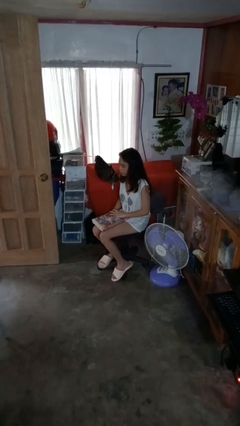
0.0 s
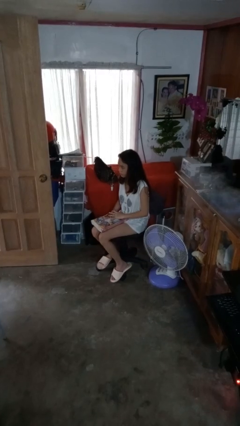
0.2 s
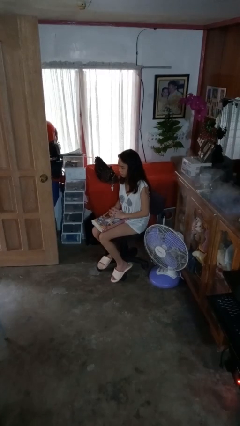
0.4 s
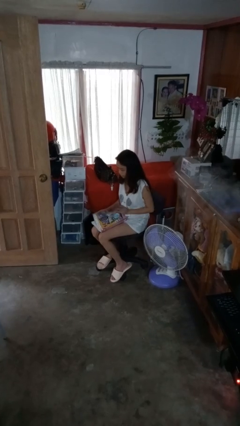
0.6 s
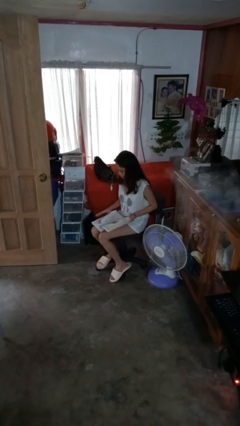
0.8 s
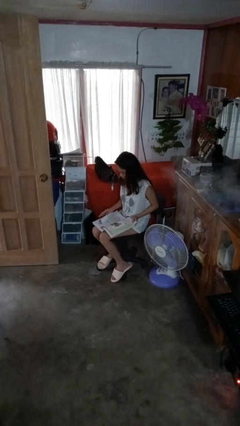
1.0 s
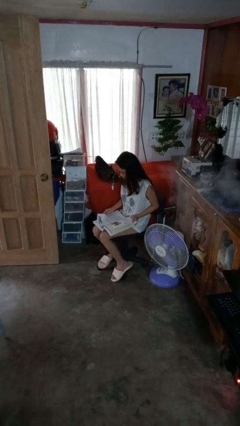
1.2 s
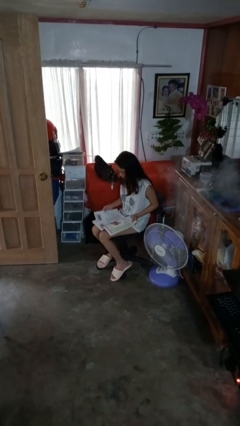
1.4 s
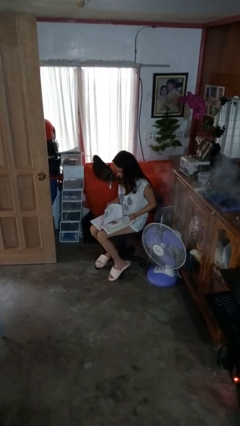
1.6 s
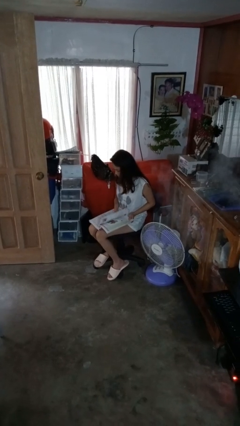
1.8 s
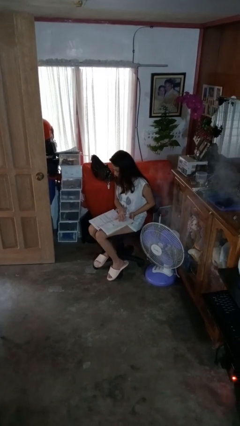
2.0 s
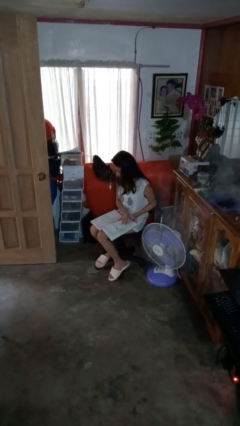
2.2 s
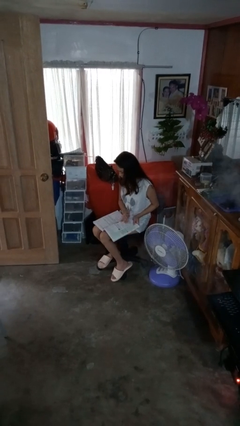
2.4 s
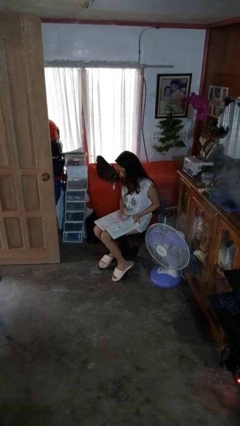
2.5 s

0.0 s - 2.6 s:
person reads book

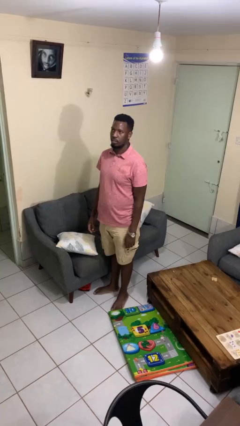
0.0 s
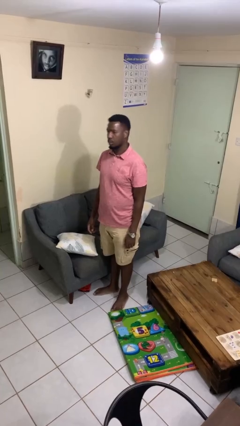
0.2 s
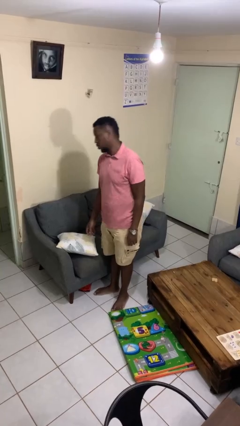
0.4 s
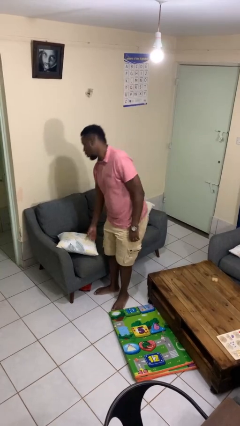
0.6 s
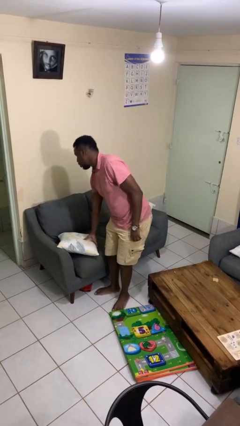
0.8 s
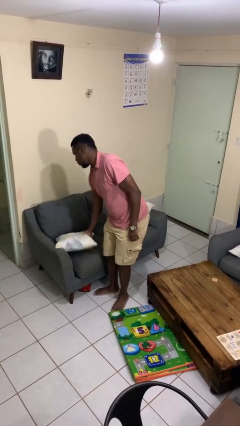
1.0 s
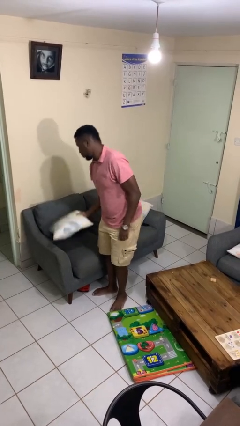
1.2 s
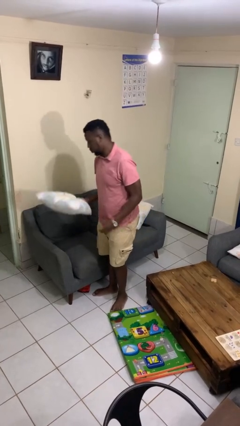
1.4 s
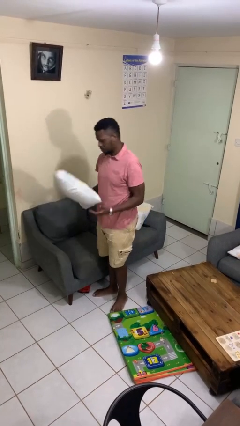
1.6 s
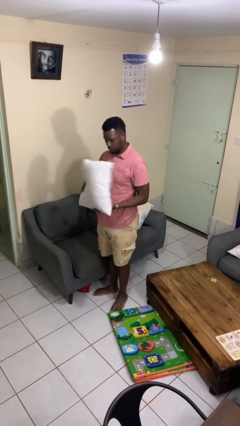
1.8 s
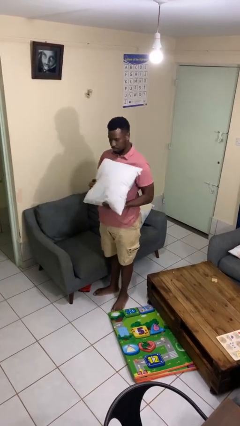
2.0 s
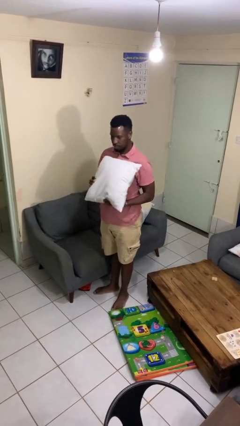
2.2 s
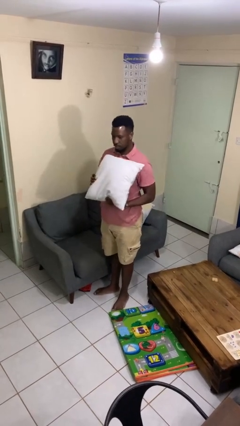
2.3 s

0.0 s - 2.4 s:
person picks up object from couch

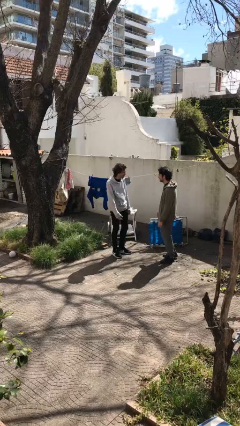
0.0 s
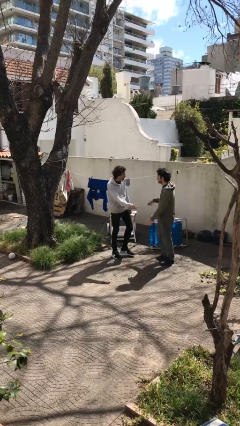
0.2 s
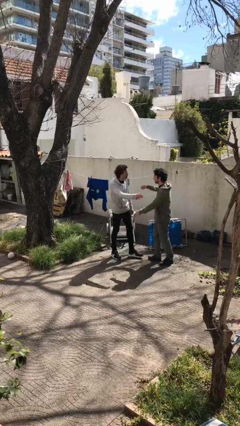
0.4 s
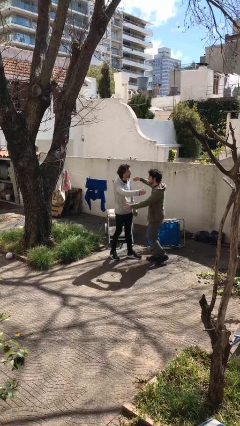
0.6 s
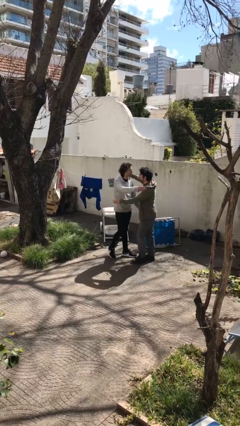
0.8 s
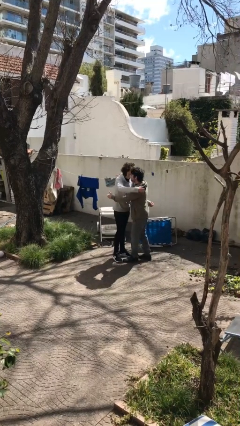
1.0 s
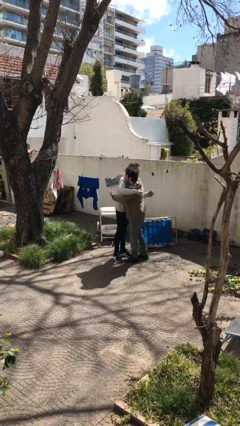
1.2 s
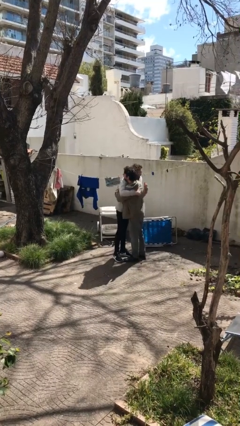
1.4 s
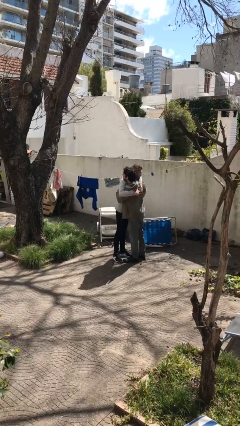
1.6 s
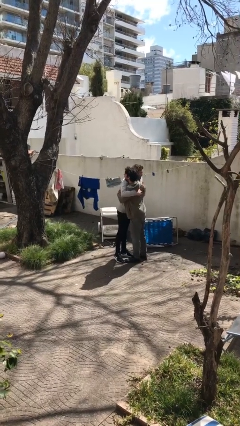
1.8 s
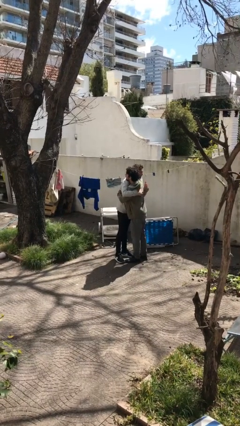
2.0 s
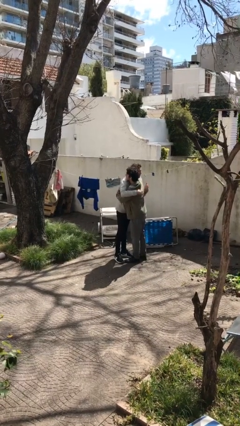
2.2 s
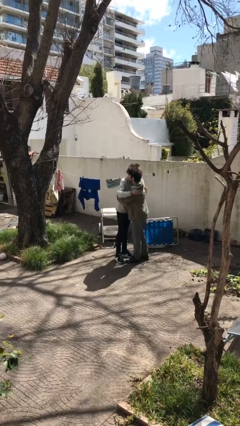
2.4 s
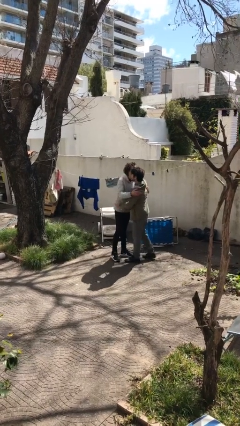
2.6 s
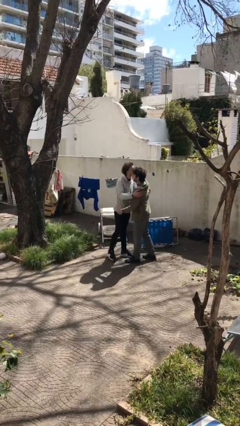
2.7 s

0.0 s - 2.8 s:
person embraces person

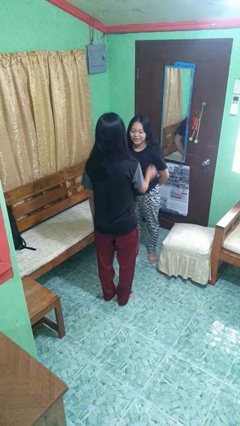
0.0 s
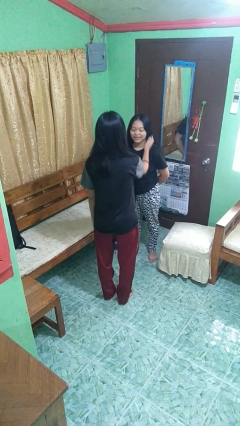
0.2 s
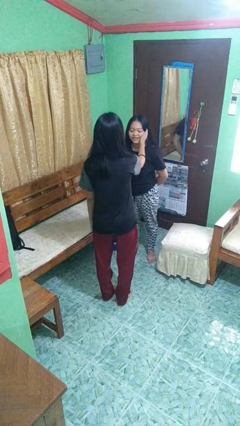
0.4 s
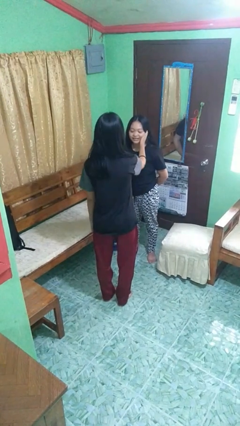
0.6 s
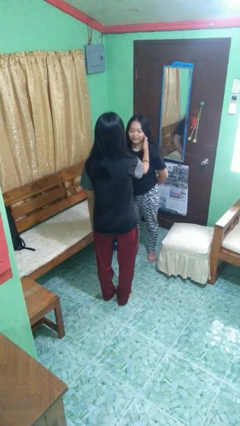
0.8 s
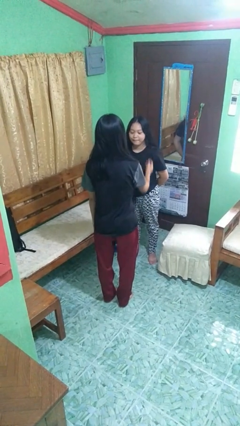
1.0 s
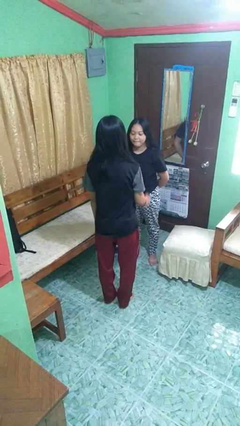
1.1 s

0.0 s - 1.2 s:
person touches face of person

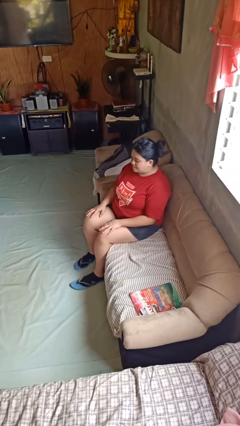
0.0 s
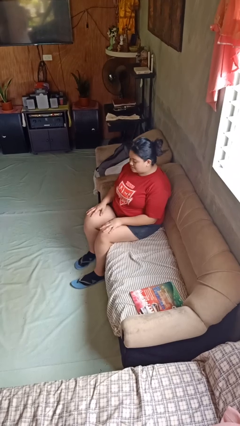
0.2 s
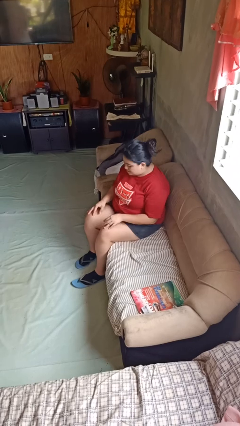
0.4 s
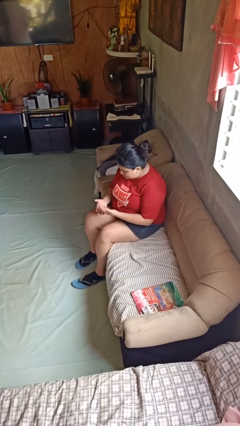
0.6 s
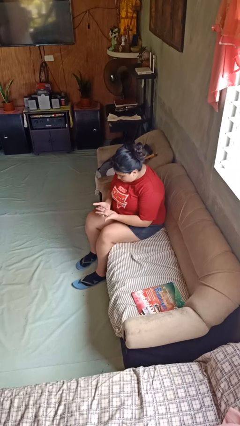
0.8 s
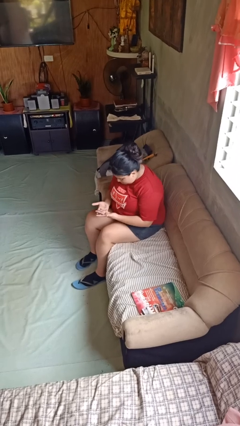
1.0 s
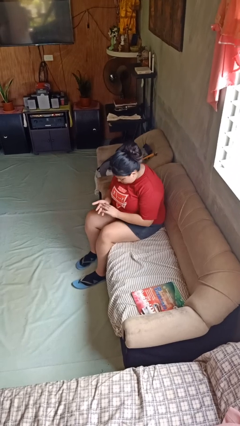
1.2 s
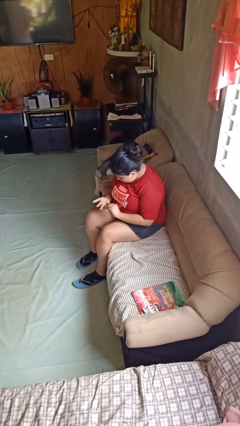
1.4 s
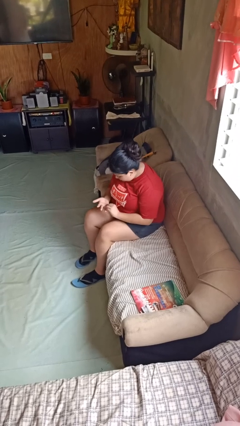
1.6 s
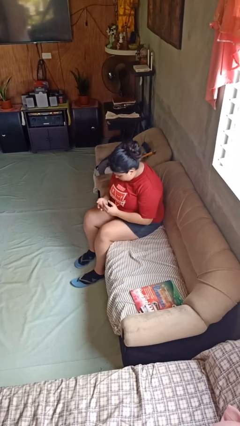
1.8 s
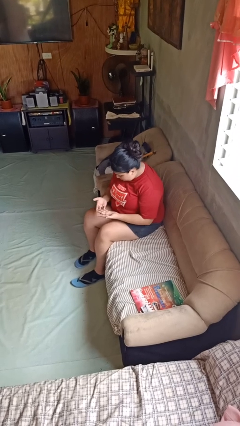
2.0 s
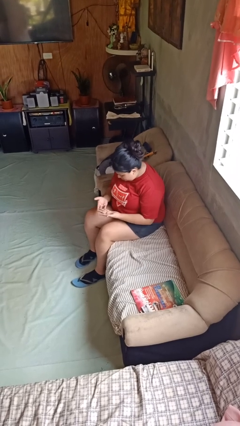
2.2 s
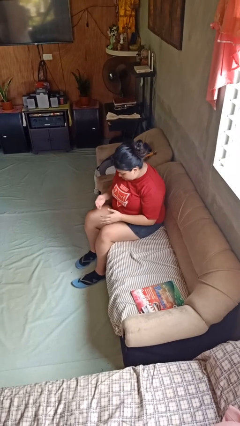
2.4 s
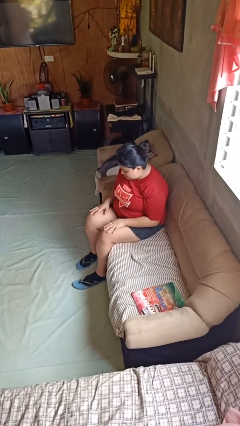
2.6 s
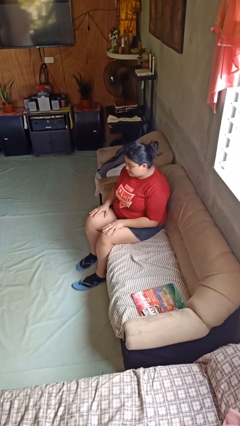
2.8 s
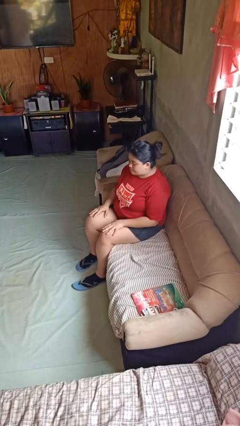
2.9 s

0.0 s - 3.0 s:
person looks at hands in lap

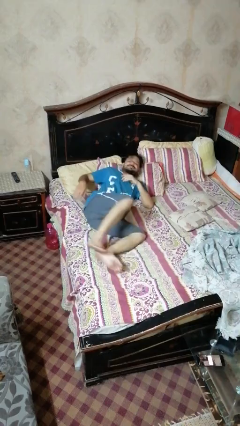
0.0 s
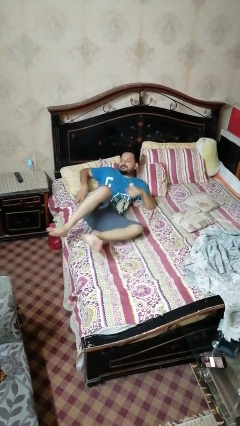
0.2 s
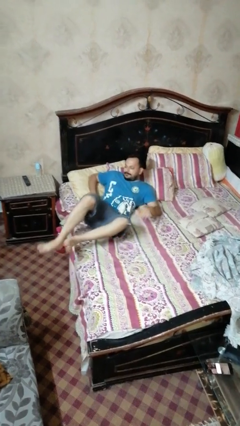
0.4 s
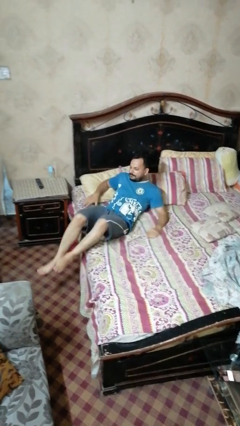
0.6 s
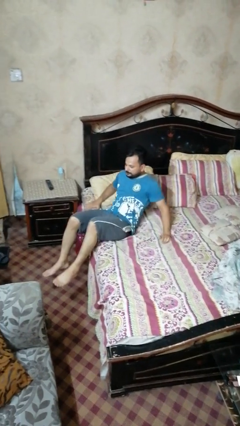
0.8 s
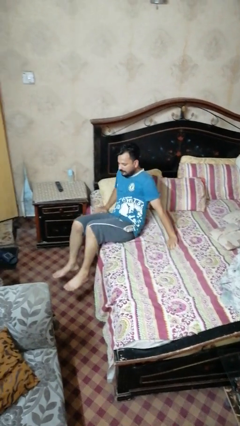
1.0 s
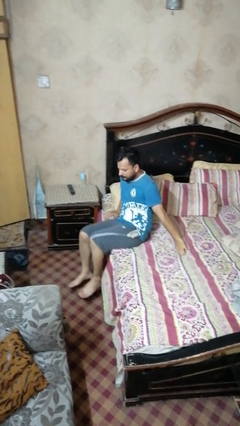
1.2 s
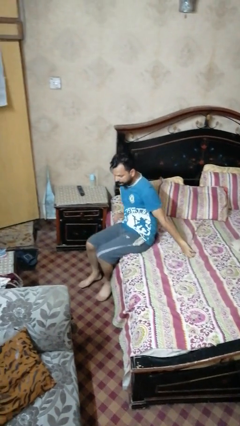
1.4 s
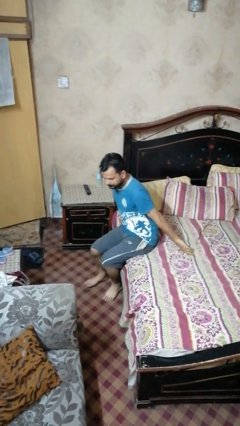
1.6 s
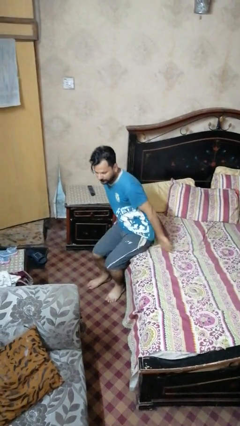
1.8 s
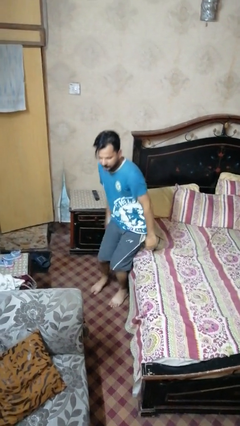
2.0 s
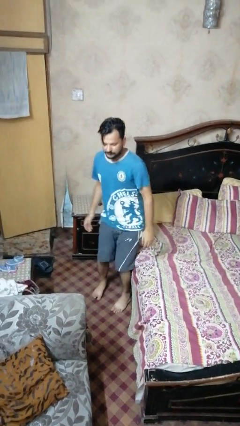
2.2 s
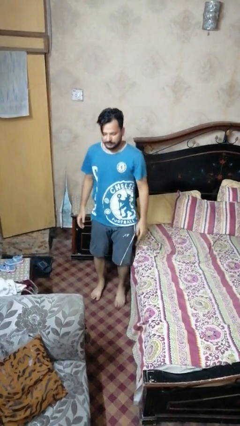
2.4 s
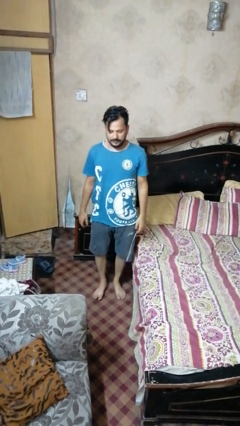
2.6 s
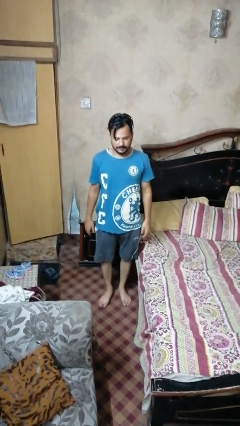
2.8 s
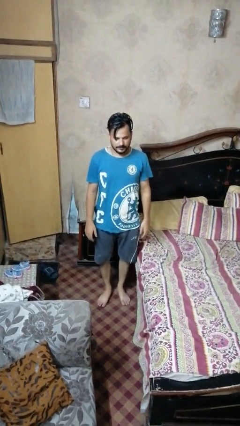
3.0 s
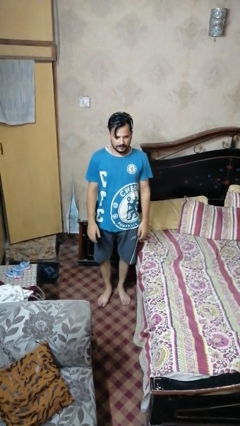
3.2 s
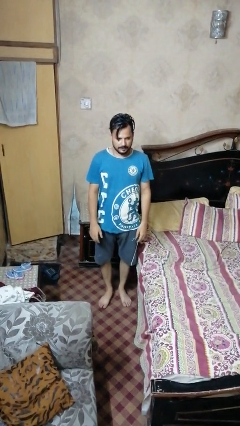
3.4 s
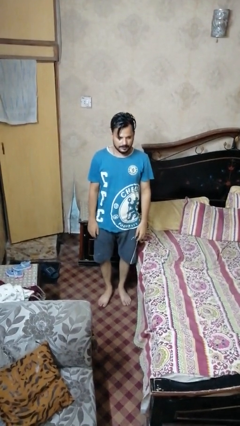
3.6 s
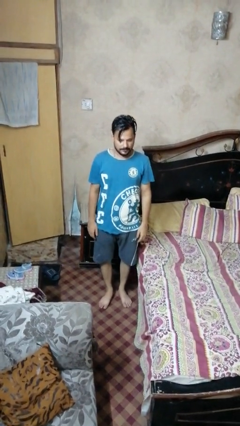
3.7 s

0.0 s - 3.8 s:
person stands up

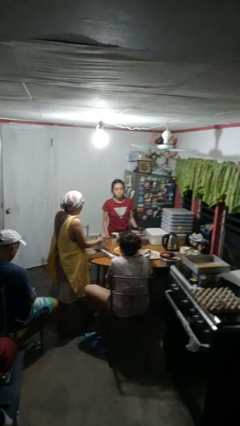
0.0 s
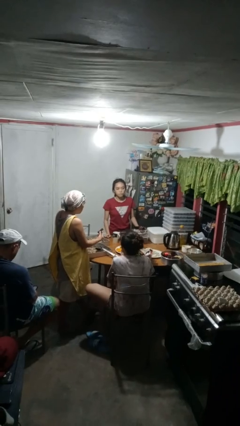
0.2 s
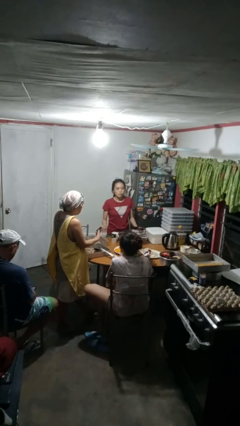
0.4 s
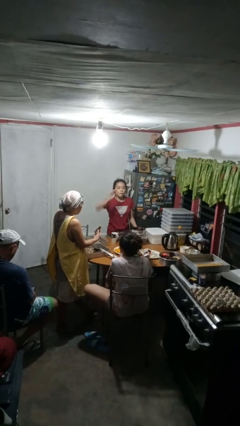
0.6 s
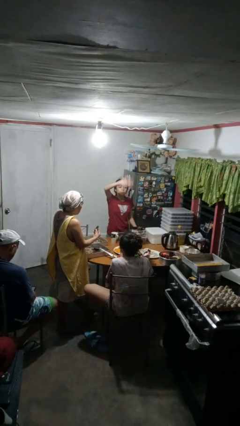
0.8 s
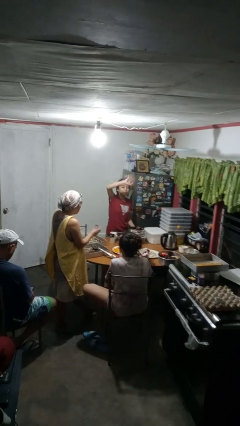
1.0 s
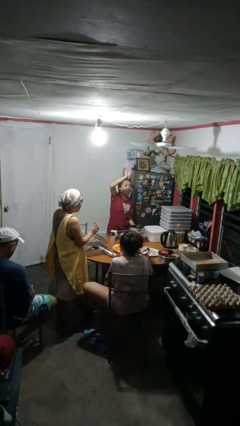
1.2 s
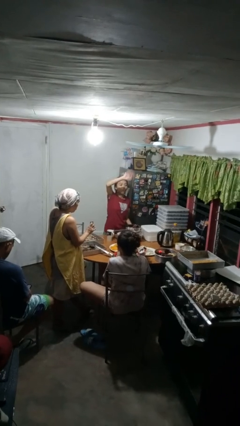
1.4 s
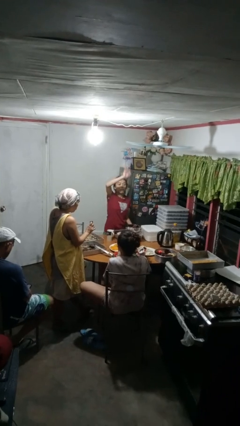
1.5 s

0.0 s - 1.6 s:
person waves at person
